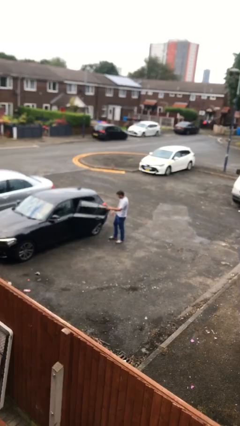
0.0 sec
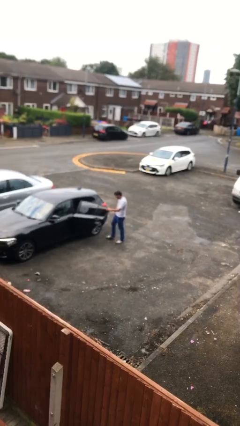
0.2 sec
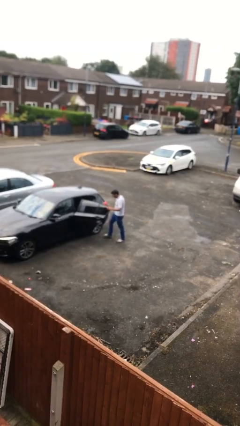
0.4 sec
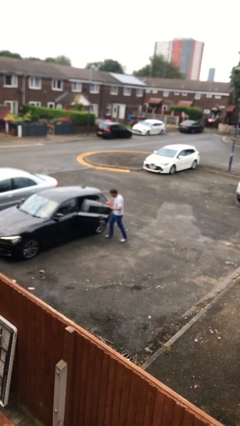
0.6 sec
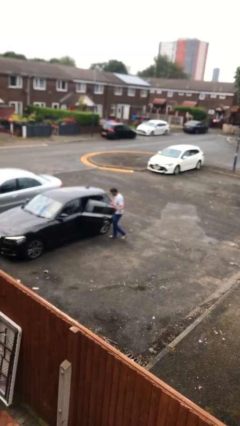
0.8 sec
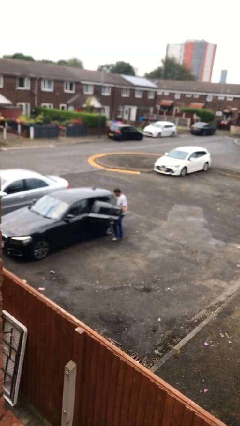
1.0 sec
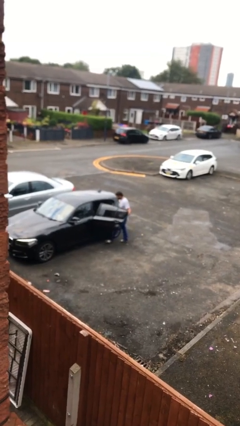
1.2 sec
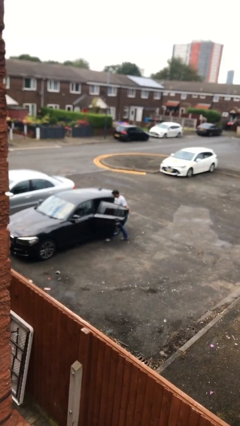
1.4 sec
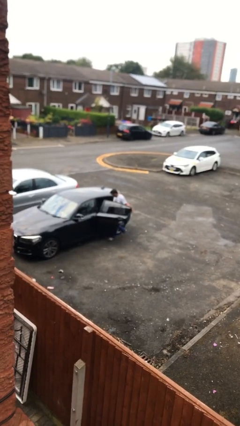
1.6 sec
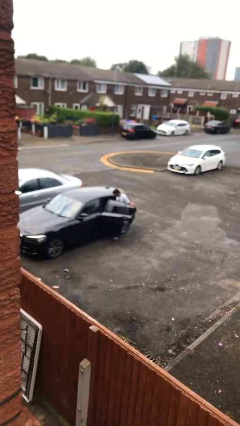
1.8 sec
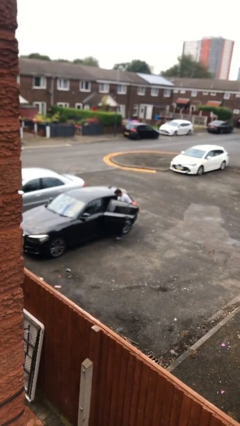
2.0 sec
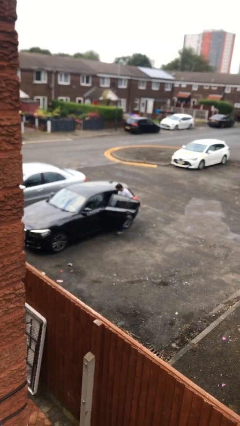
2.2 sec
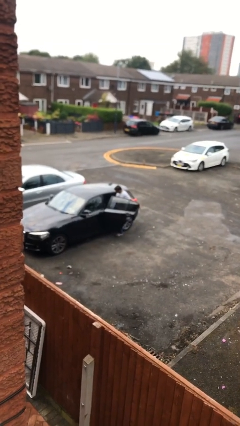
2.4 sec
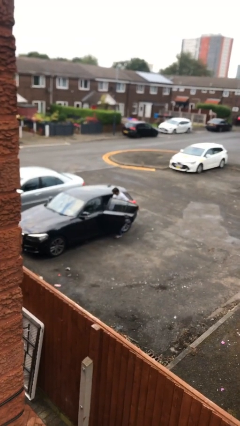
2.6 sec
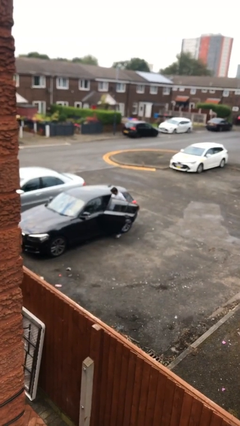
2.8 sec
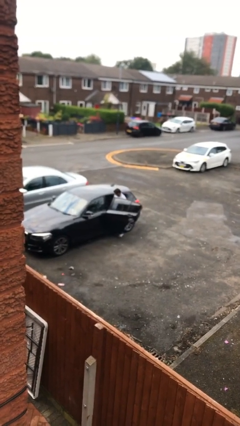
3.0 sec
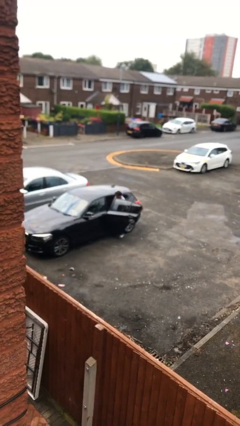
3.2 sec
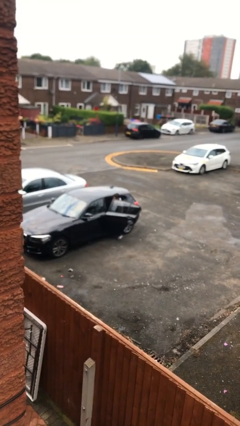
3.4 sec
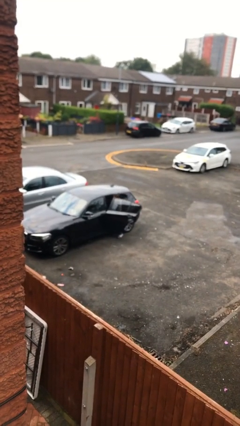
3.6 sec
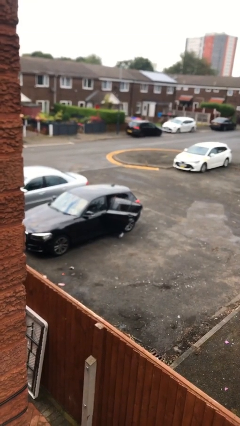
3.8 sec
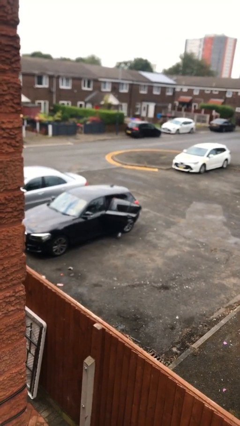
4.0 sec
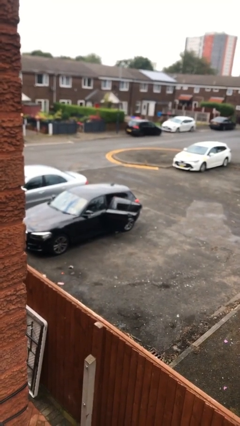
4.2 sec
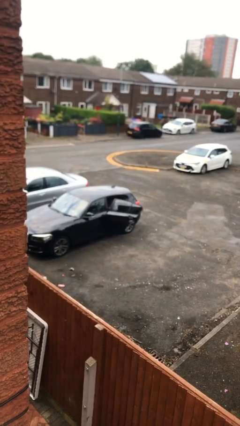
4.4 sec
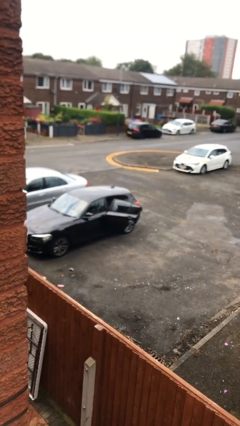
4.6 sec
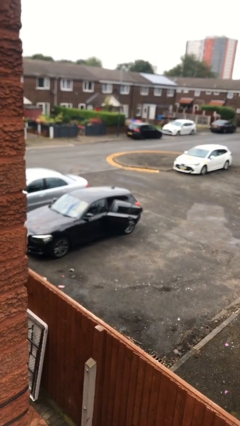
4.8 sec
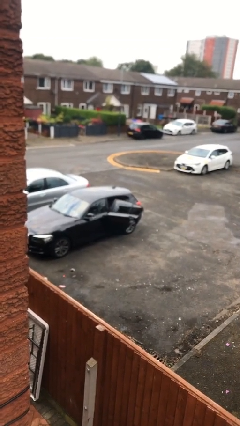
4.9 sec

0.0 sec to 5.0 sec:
person enters car

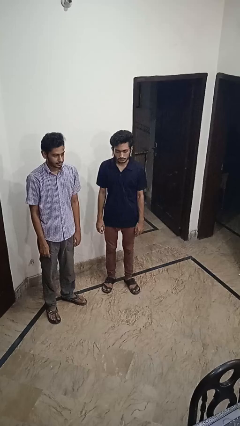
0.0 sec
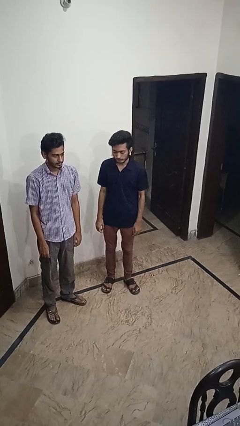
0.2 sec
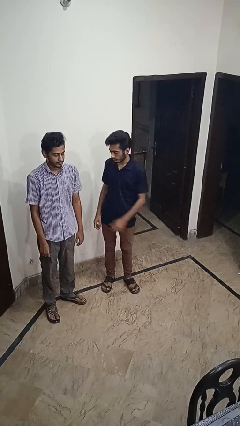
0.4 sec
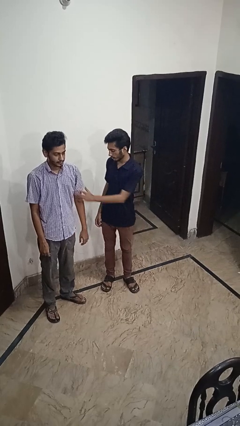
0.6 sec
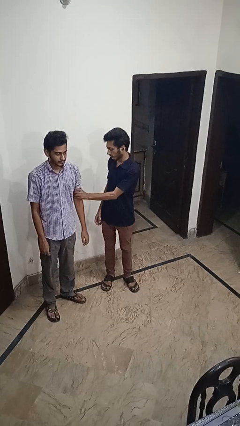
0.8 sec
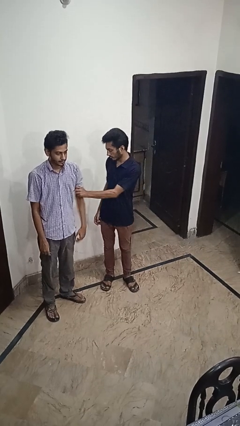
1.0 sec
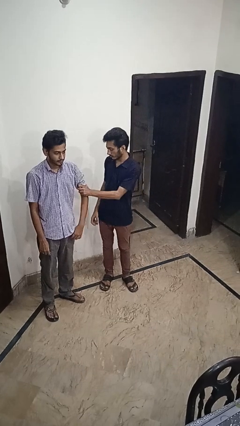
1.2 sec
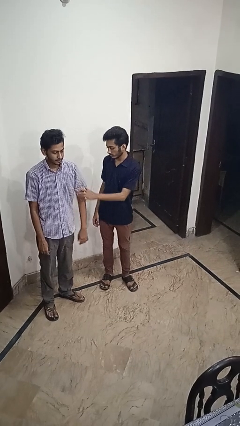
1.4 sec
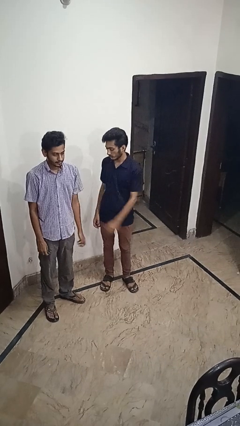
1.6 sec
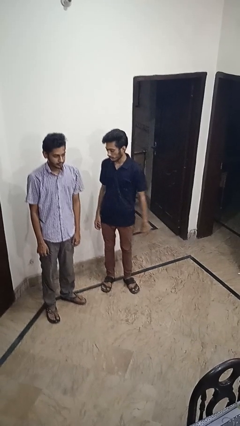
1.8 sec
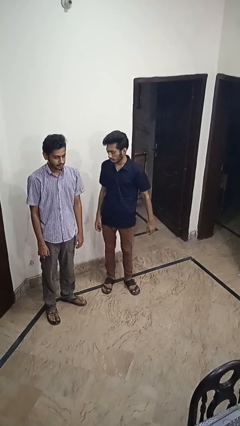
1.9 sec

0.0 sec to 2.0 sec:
person grabs person by bicep

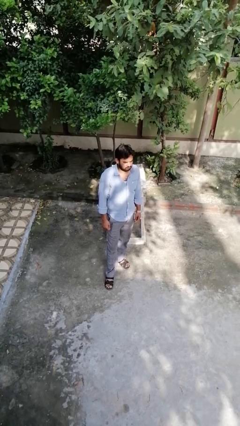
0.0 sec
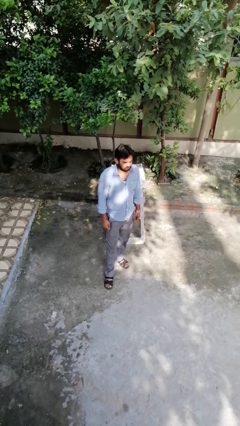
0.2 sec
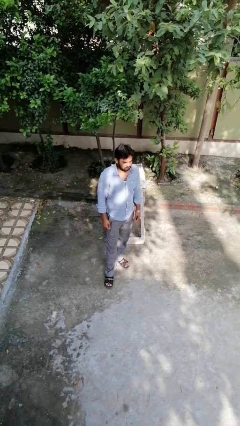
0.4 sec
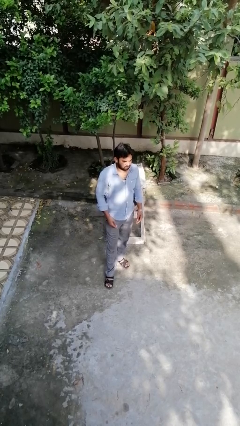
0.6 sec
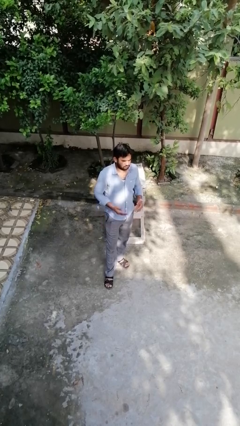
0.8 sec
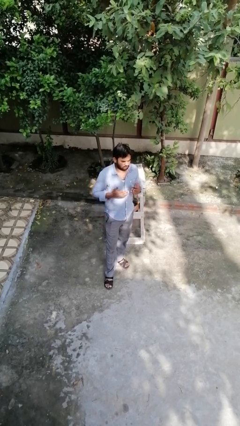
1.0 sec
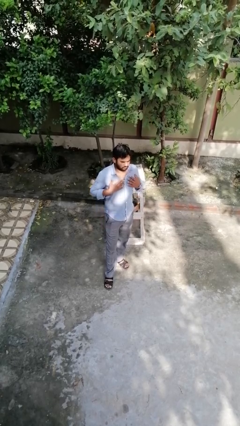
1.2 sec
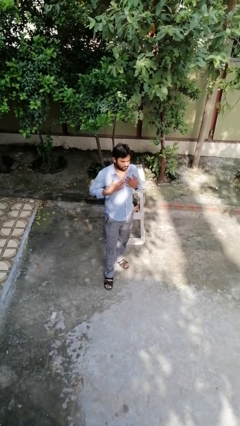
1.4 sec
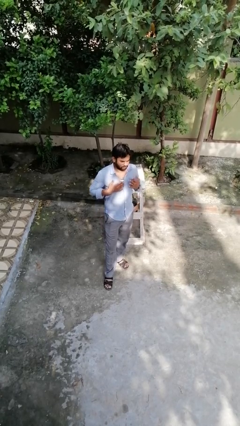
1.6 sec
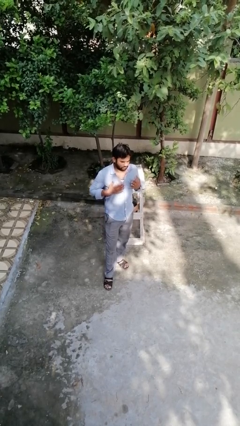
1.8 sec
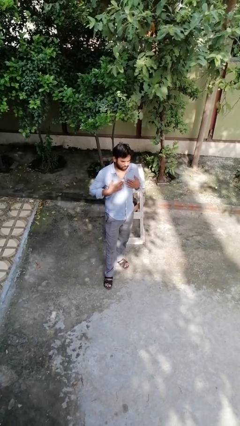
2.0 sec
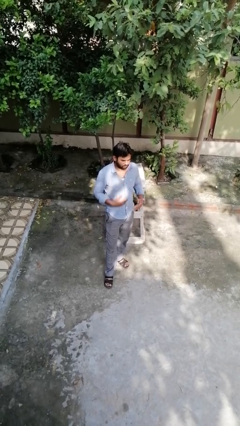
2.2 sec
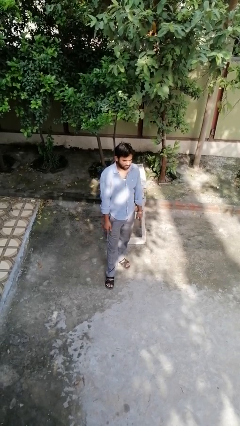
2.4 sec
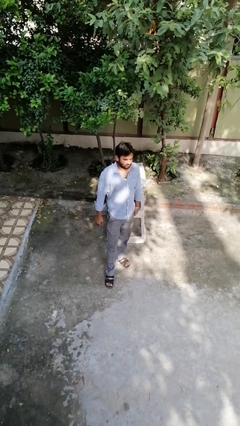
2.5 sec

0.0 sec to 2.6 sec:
person drums on chest

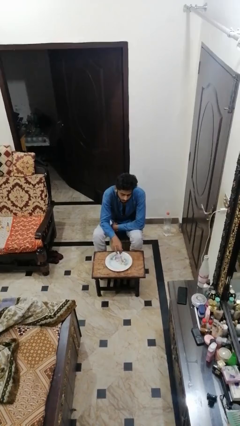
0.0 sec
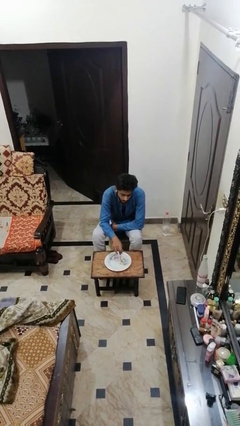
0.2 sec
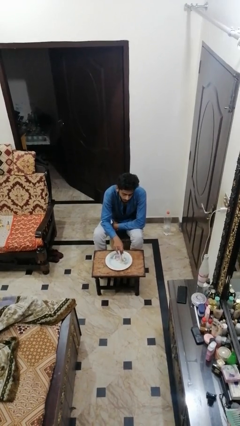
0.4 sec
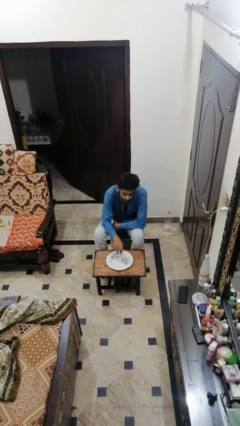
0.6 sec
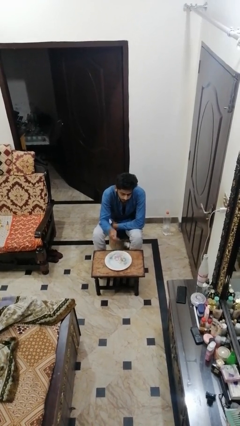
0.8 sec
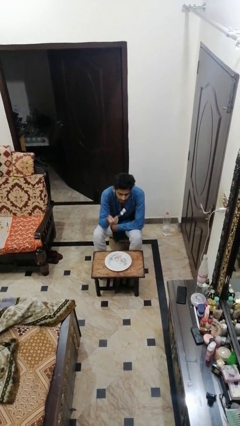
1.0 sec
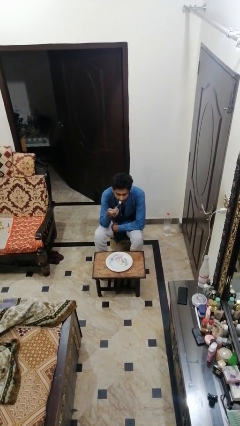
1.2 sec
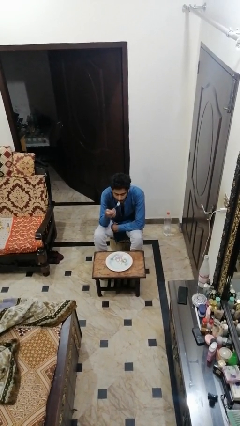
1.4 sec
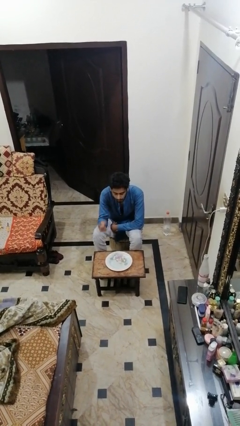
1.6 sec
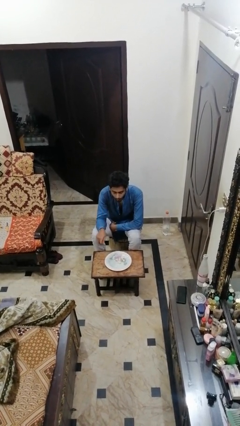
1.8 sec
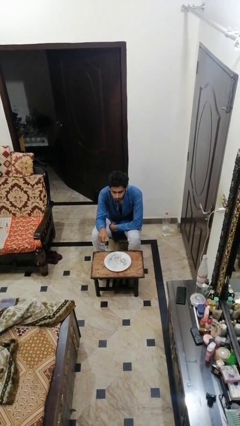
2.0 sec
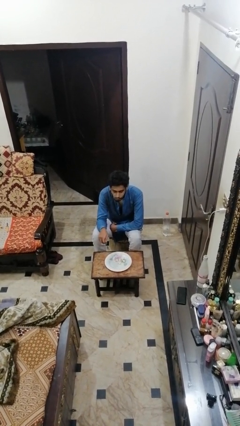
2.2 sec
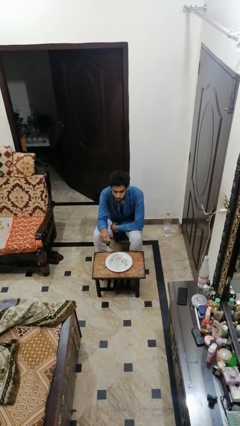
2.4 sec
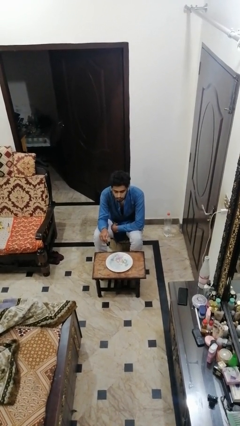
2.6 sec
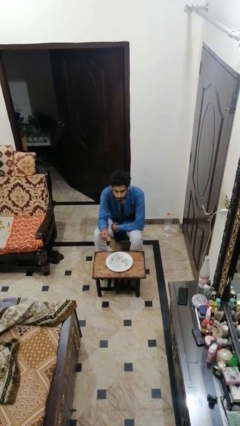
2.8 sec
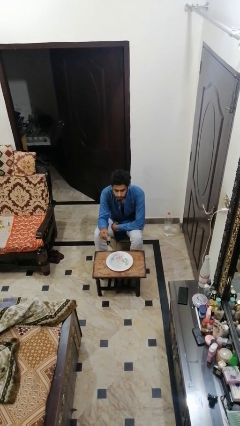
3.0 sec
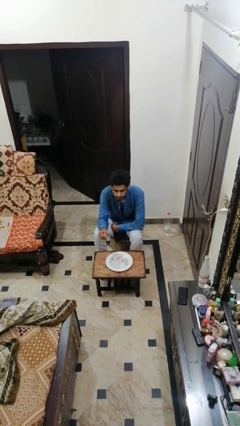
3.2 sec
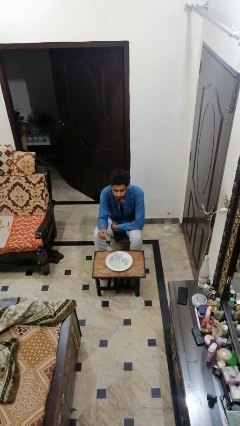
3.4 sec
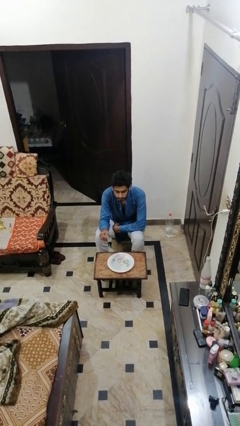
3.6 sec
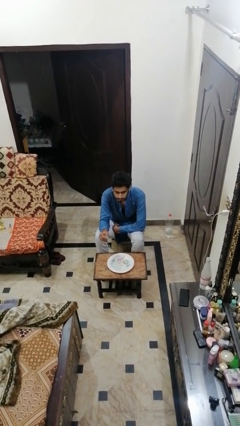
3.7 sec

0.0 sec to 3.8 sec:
person eats with utensil

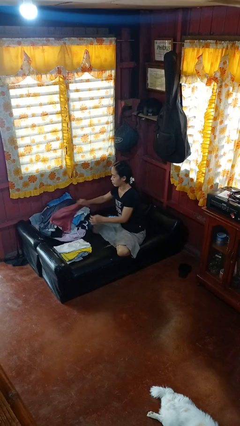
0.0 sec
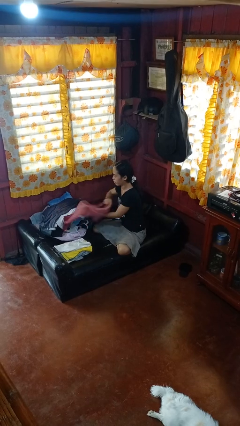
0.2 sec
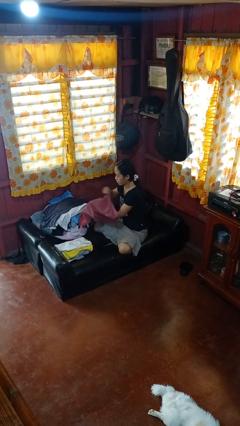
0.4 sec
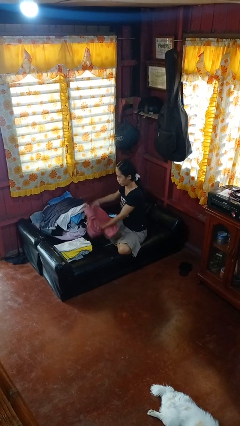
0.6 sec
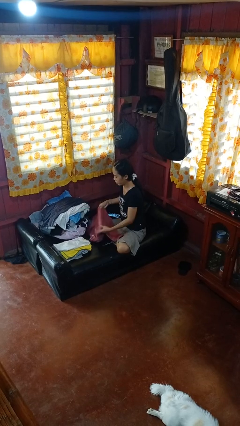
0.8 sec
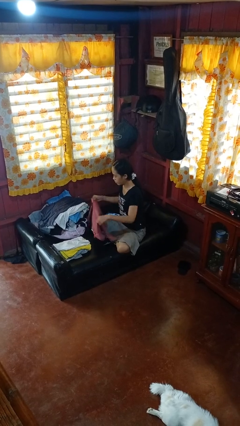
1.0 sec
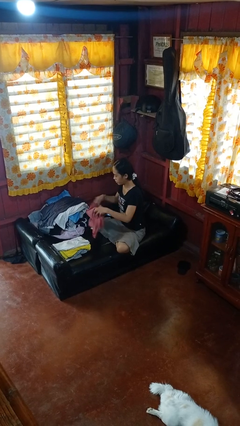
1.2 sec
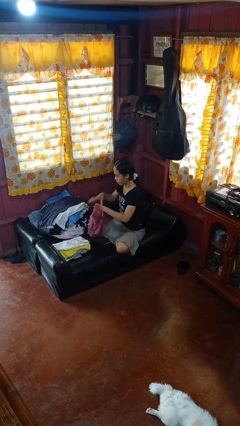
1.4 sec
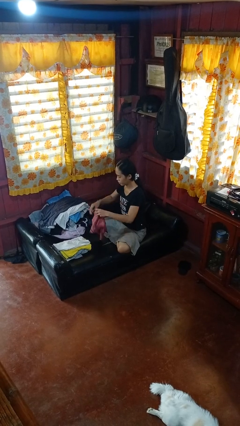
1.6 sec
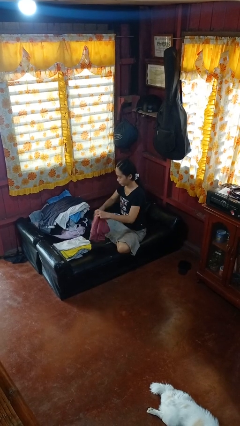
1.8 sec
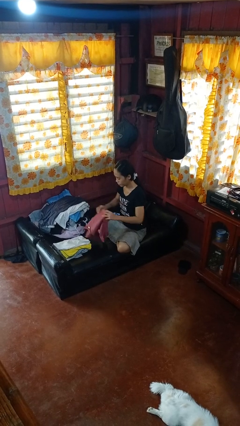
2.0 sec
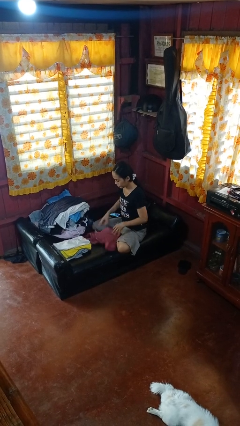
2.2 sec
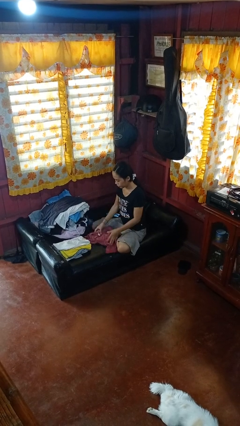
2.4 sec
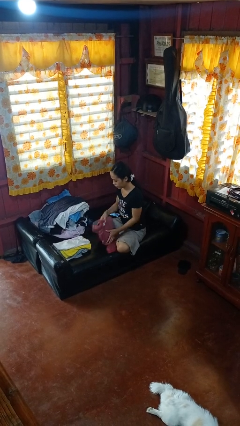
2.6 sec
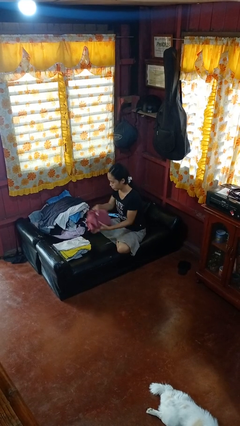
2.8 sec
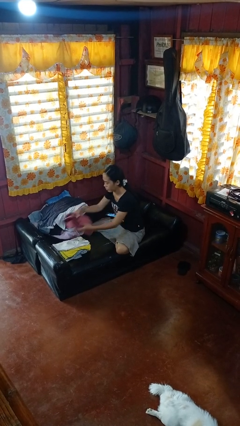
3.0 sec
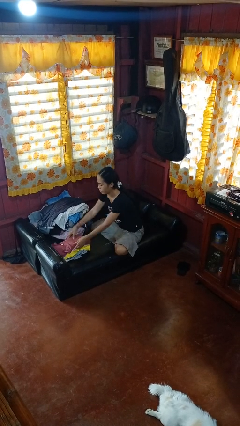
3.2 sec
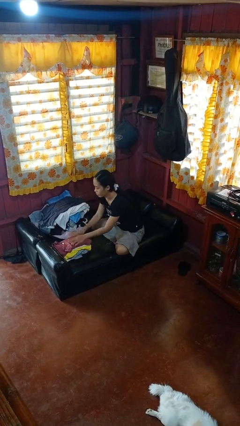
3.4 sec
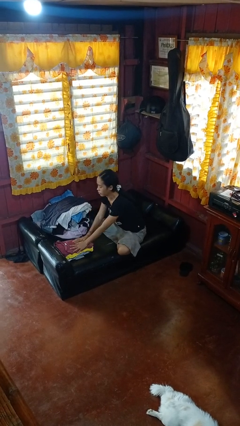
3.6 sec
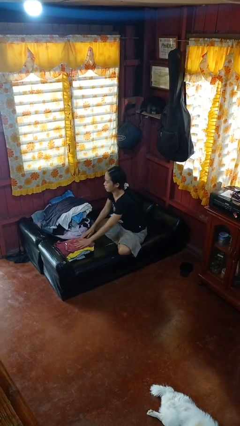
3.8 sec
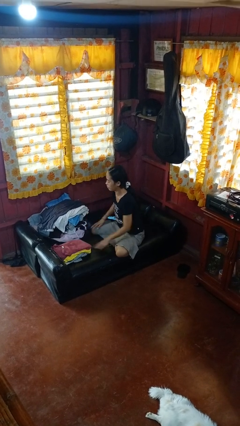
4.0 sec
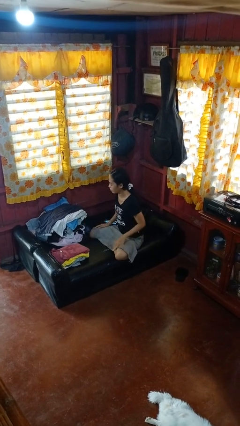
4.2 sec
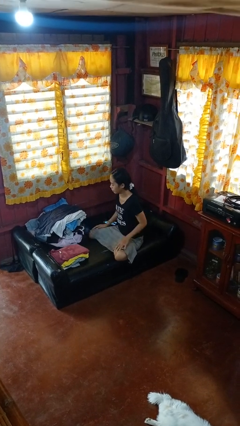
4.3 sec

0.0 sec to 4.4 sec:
person folds shirt

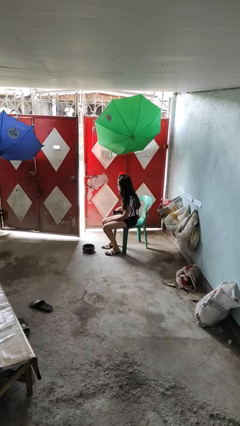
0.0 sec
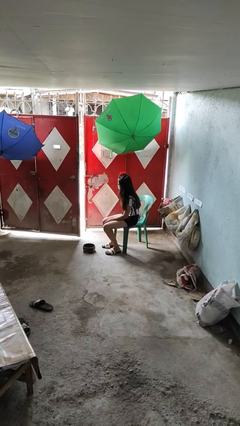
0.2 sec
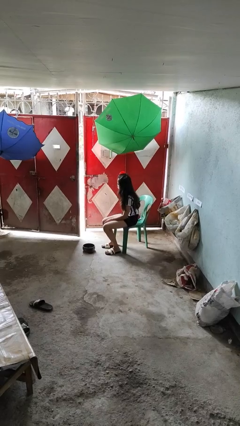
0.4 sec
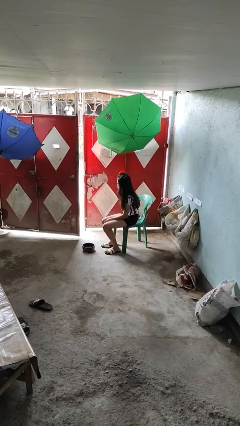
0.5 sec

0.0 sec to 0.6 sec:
person puts phone into pocket
